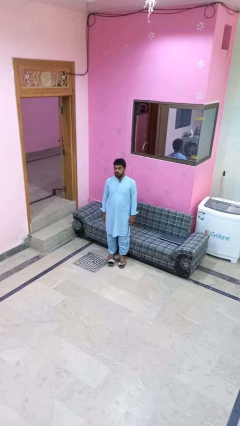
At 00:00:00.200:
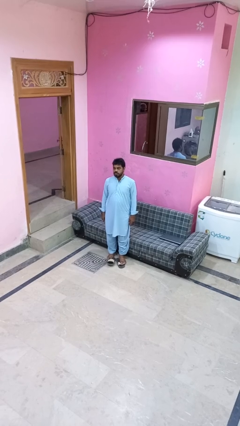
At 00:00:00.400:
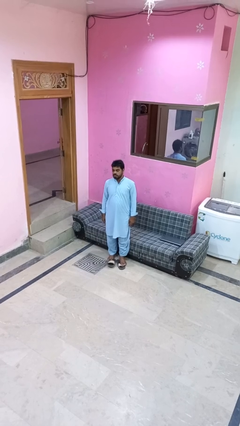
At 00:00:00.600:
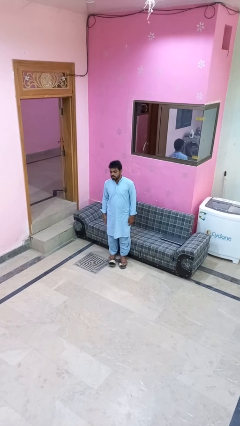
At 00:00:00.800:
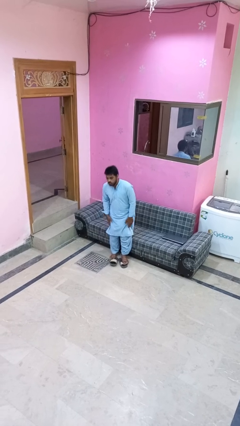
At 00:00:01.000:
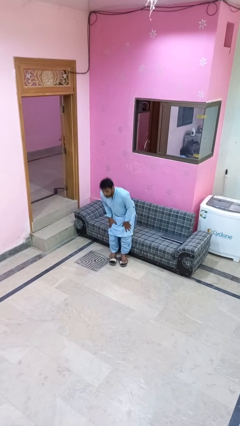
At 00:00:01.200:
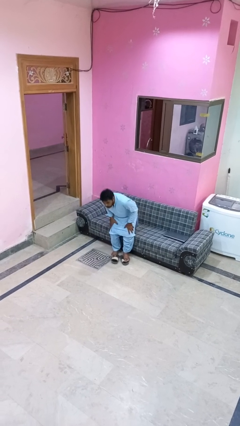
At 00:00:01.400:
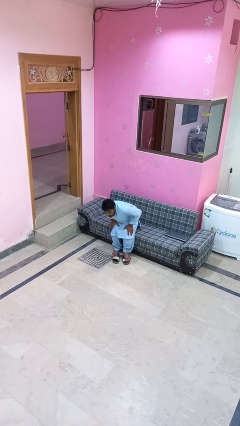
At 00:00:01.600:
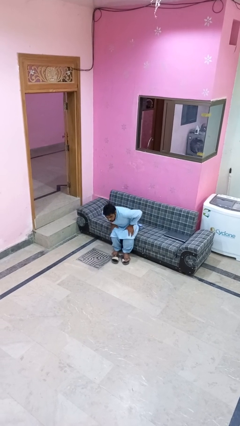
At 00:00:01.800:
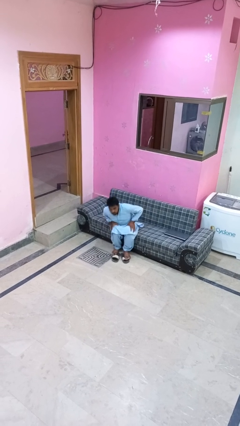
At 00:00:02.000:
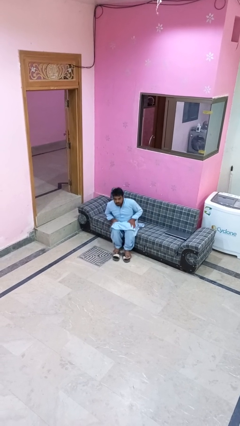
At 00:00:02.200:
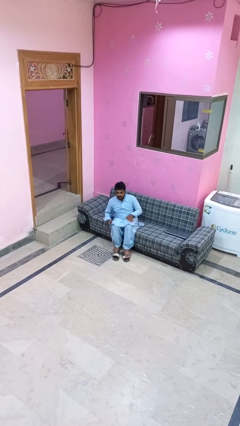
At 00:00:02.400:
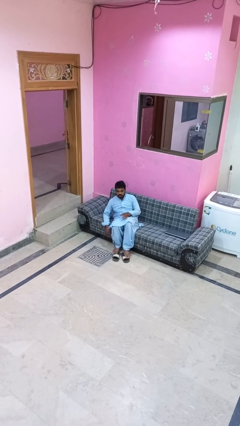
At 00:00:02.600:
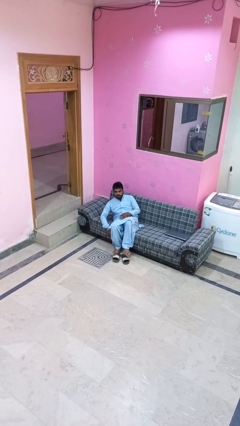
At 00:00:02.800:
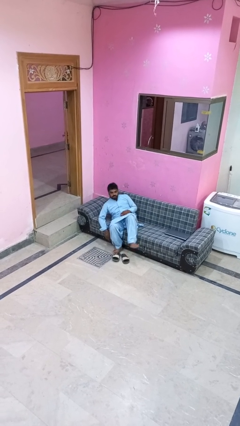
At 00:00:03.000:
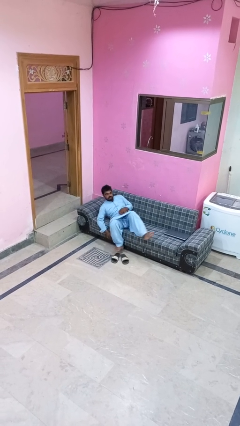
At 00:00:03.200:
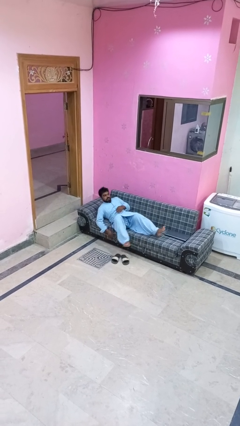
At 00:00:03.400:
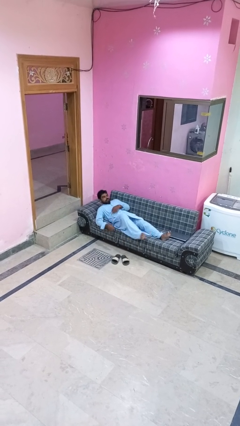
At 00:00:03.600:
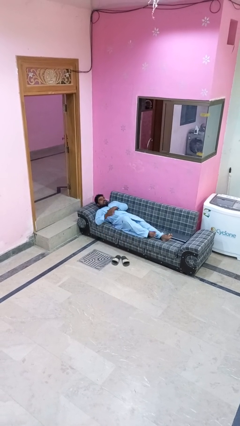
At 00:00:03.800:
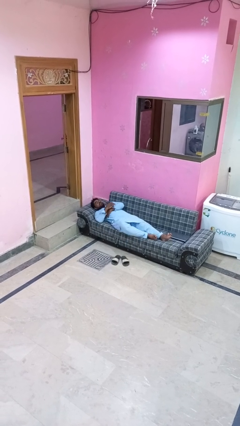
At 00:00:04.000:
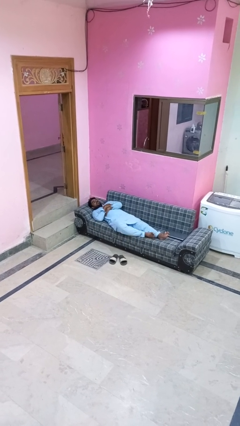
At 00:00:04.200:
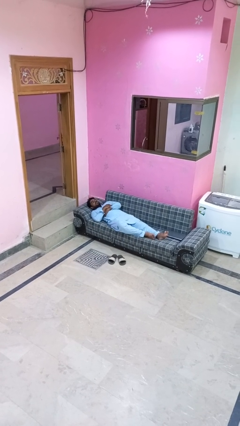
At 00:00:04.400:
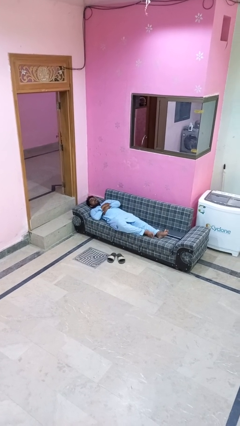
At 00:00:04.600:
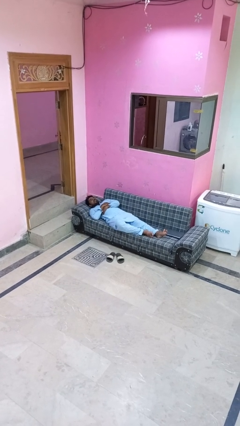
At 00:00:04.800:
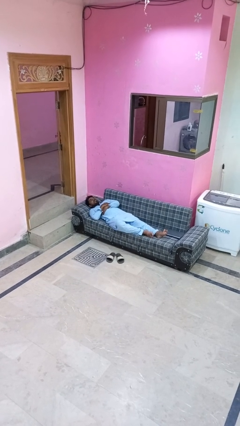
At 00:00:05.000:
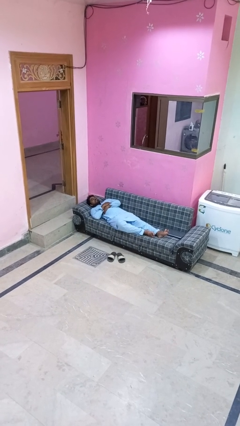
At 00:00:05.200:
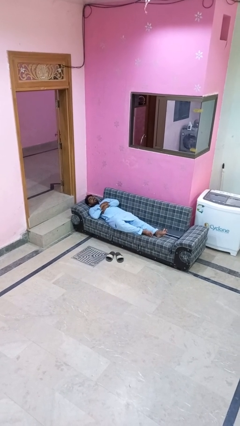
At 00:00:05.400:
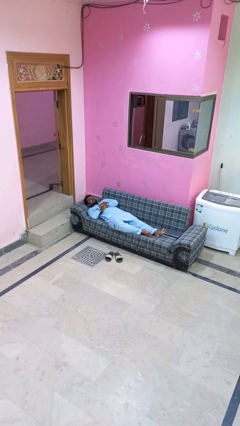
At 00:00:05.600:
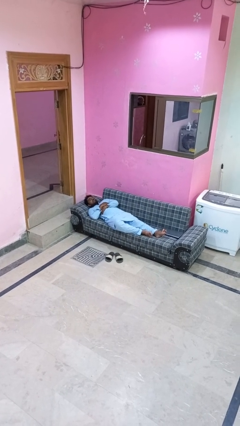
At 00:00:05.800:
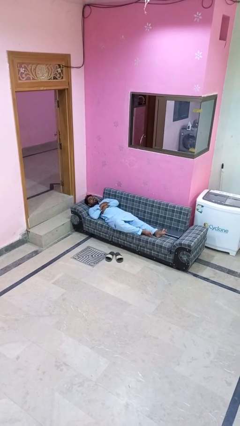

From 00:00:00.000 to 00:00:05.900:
person lies down on couch

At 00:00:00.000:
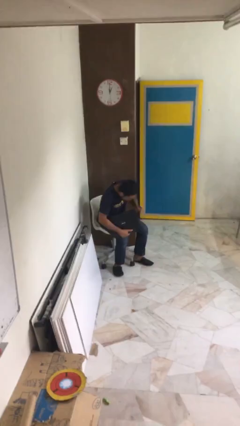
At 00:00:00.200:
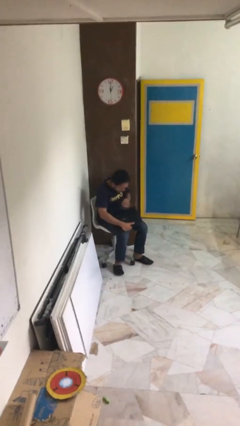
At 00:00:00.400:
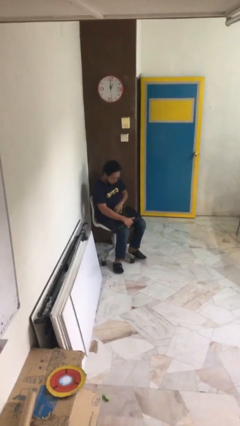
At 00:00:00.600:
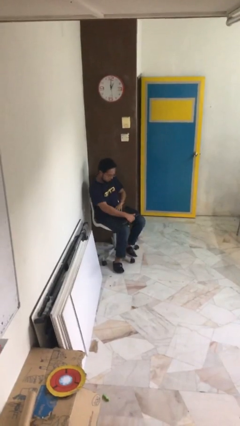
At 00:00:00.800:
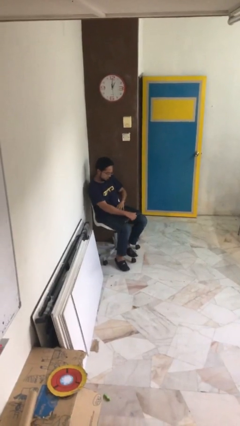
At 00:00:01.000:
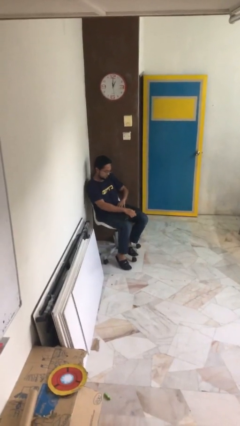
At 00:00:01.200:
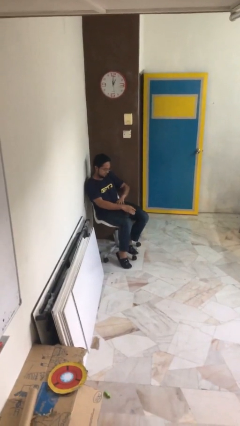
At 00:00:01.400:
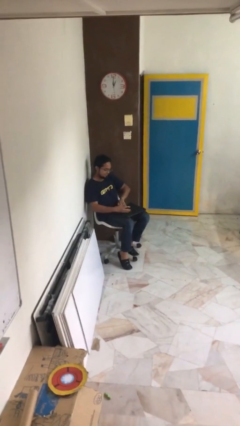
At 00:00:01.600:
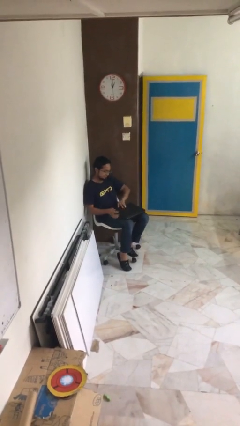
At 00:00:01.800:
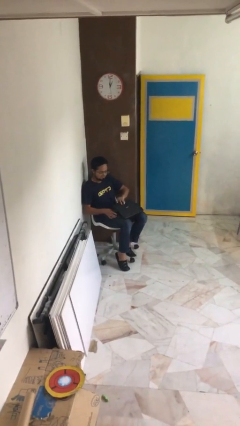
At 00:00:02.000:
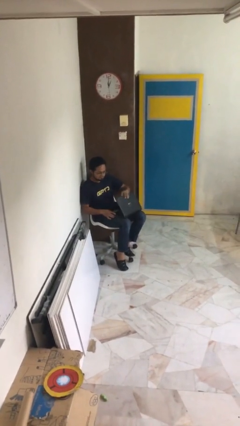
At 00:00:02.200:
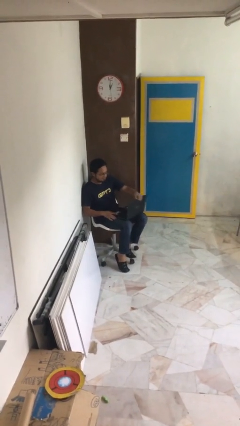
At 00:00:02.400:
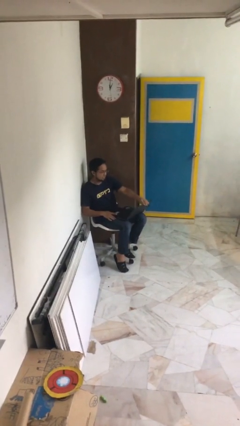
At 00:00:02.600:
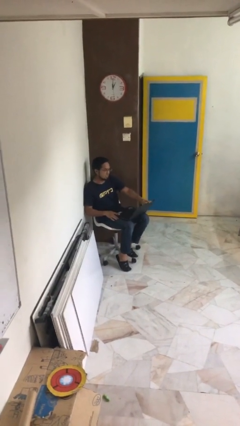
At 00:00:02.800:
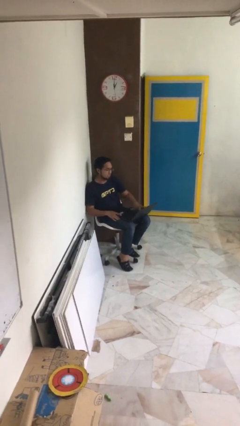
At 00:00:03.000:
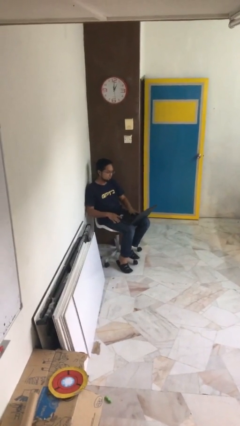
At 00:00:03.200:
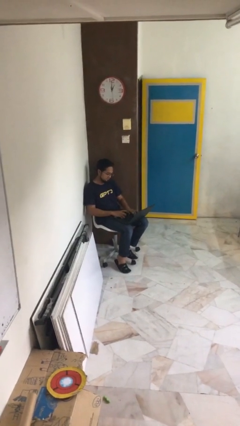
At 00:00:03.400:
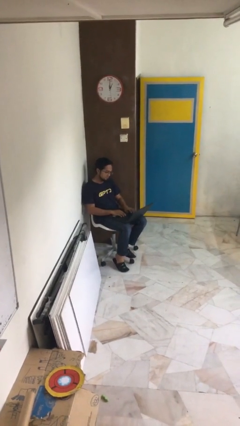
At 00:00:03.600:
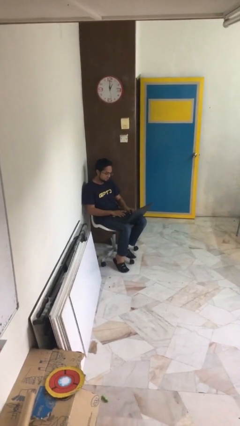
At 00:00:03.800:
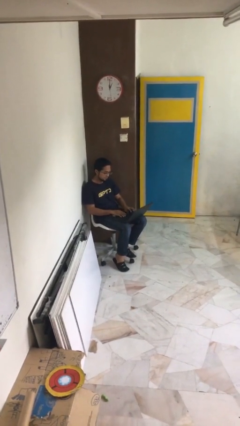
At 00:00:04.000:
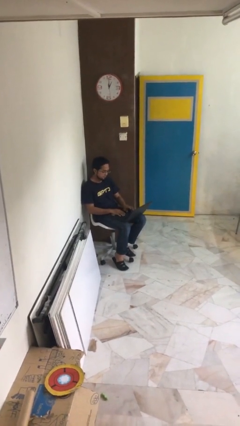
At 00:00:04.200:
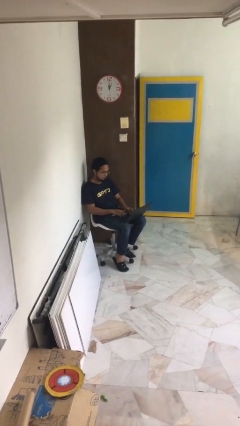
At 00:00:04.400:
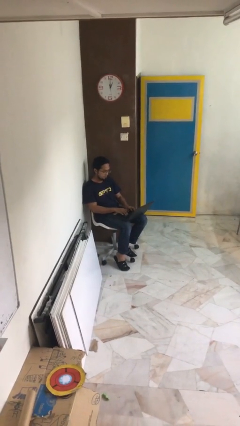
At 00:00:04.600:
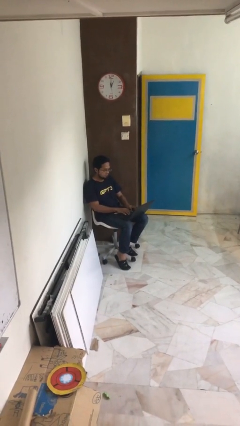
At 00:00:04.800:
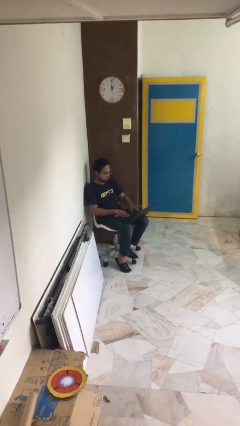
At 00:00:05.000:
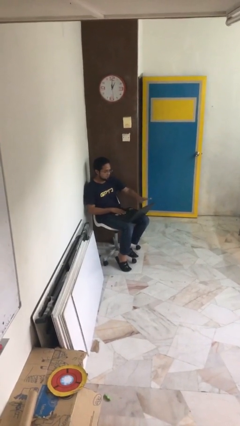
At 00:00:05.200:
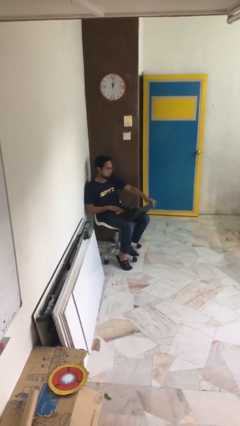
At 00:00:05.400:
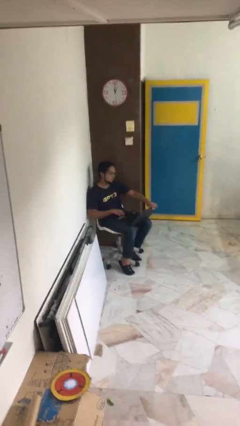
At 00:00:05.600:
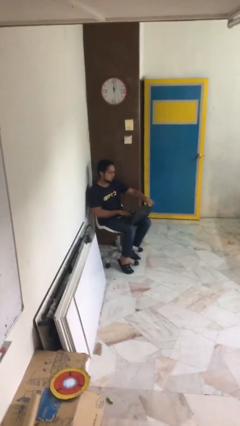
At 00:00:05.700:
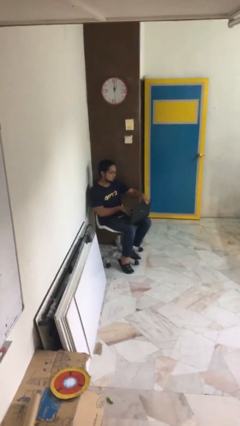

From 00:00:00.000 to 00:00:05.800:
person interacts with laptop

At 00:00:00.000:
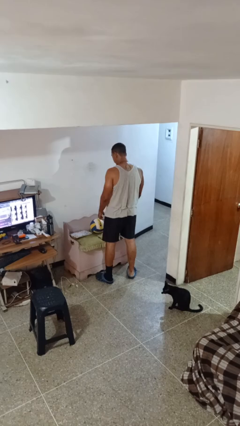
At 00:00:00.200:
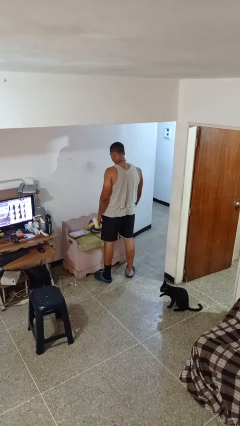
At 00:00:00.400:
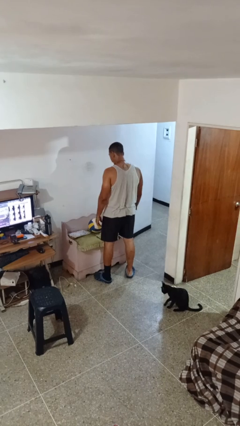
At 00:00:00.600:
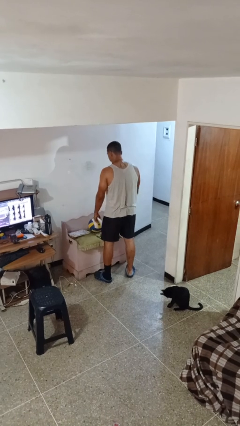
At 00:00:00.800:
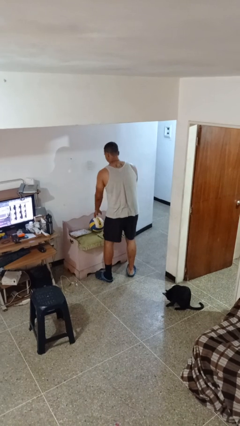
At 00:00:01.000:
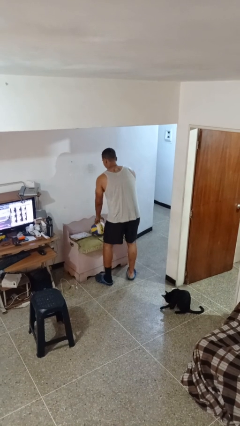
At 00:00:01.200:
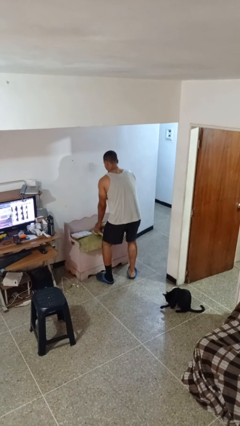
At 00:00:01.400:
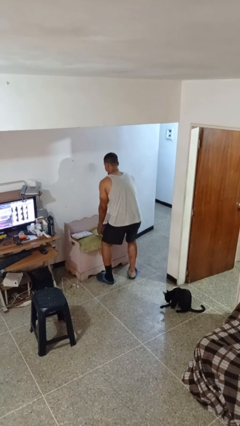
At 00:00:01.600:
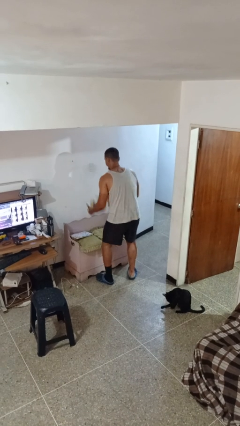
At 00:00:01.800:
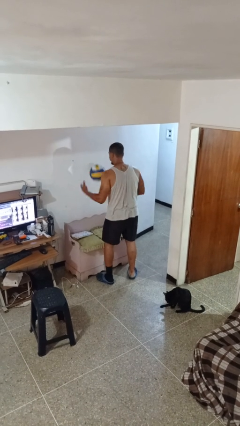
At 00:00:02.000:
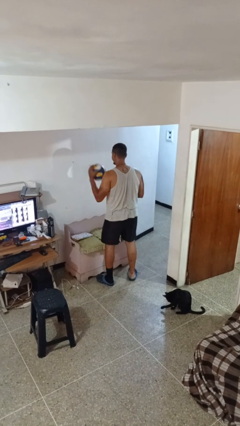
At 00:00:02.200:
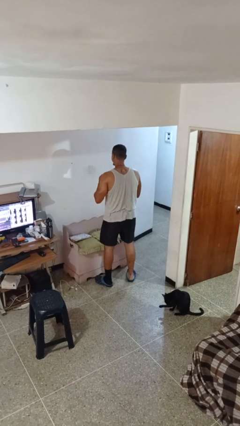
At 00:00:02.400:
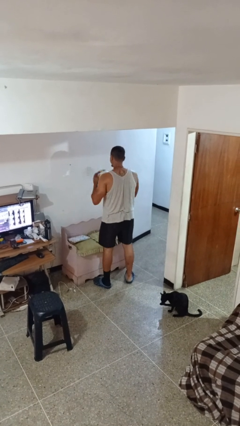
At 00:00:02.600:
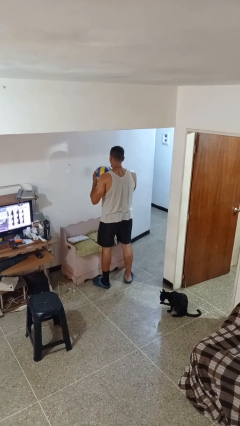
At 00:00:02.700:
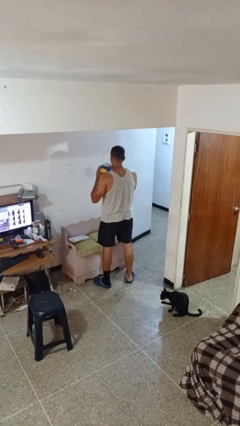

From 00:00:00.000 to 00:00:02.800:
person picks up object from couch

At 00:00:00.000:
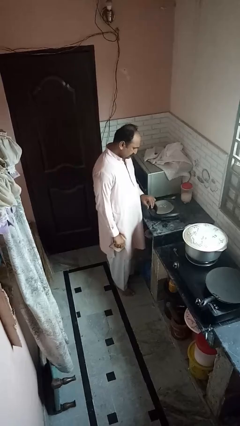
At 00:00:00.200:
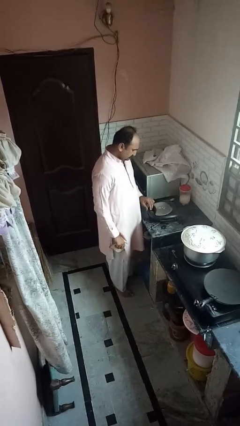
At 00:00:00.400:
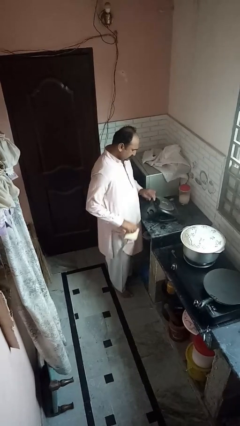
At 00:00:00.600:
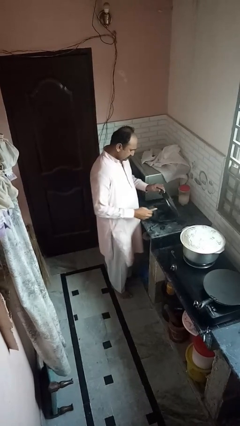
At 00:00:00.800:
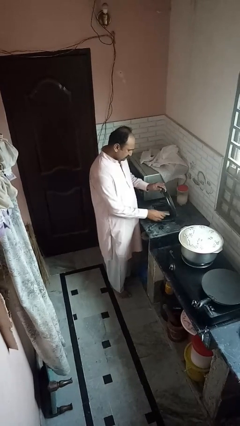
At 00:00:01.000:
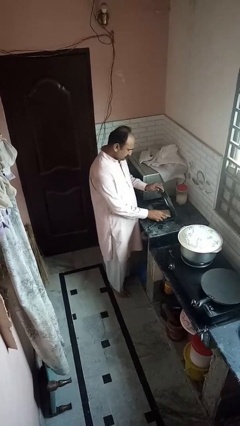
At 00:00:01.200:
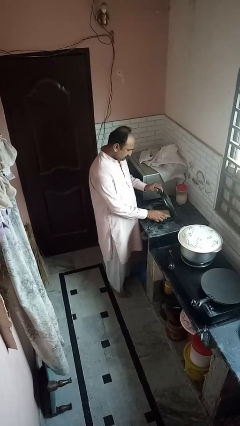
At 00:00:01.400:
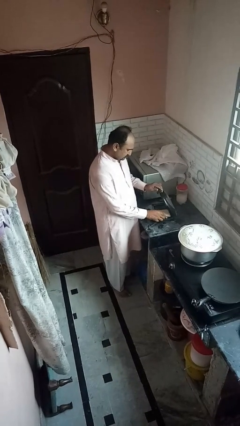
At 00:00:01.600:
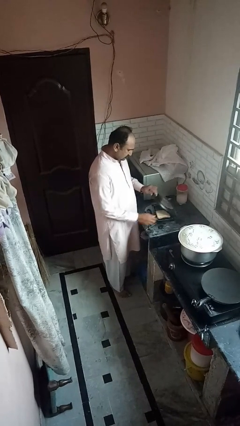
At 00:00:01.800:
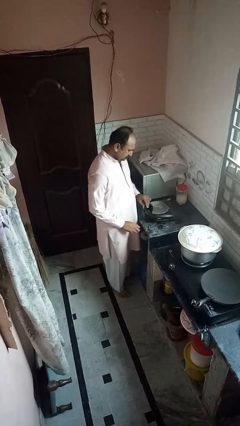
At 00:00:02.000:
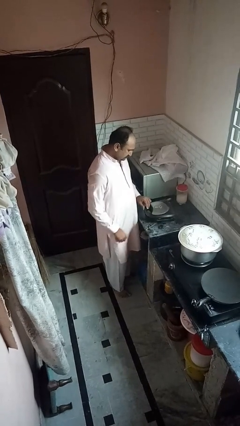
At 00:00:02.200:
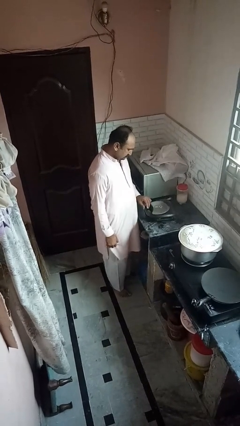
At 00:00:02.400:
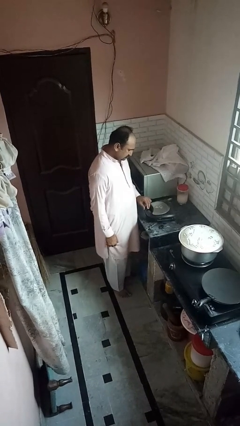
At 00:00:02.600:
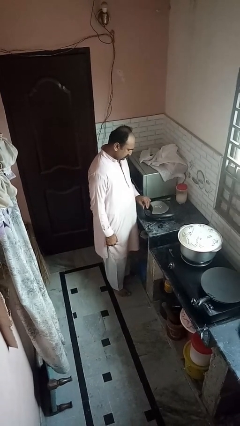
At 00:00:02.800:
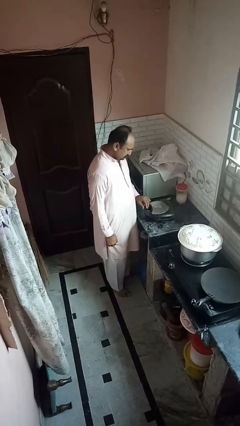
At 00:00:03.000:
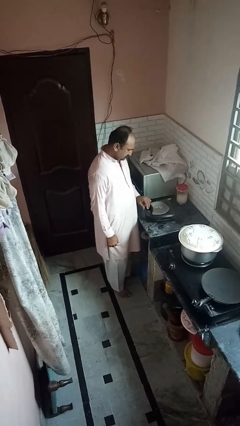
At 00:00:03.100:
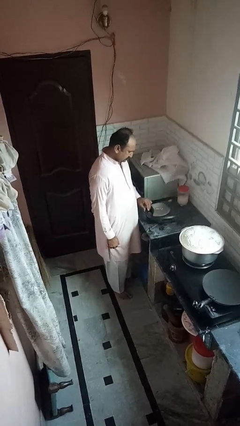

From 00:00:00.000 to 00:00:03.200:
person puts object into toaster
